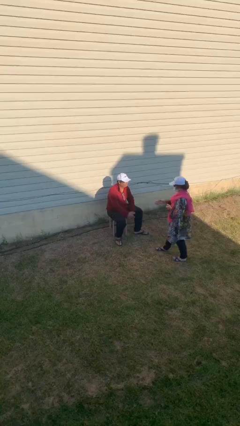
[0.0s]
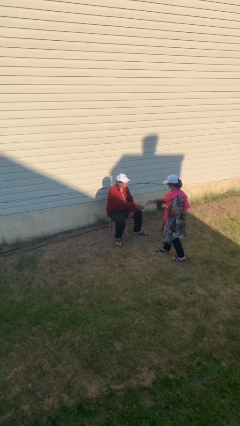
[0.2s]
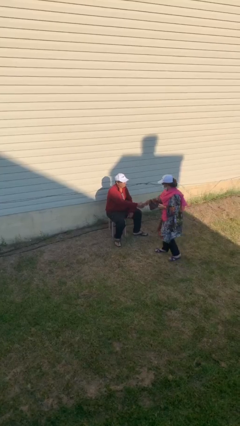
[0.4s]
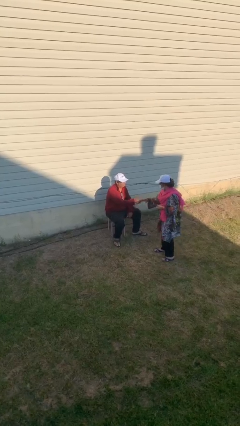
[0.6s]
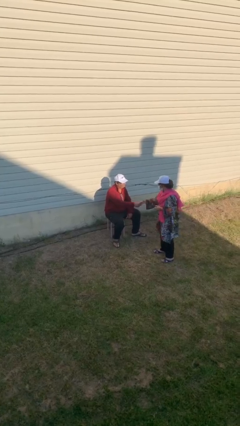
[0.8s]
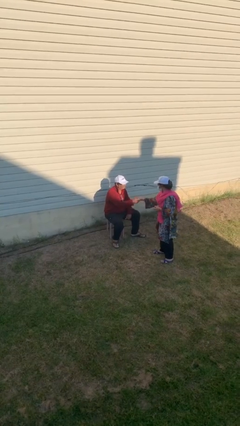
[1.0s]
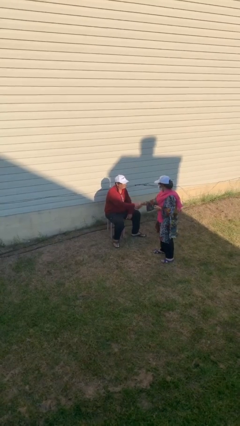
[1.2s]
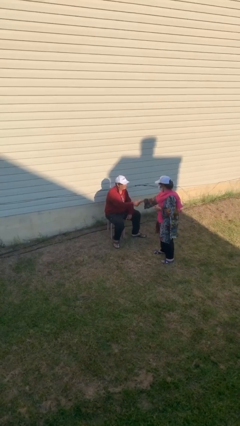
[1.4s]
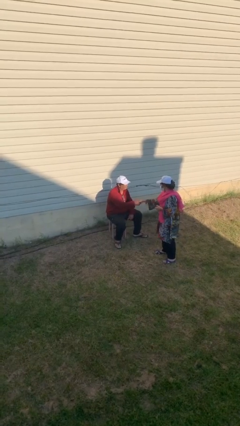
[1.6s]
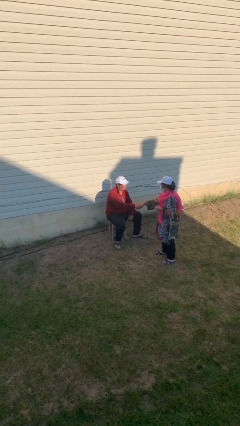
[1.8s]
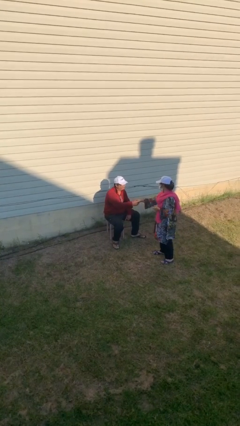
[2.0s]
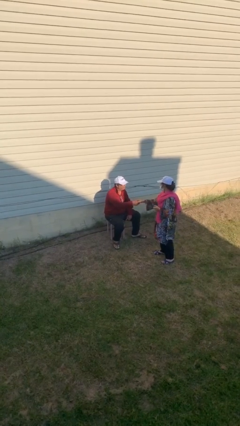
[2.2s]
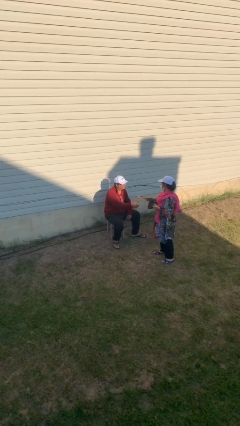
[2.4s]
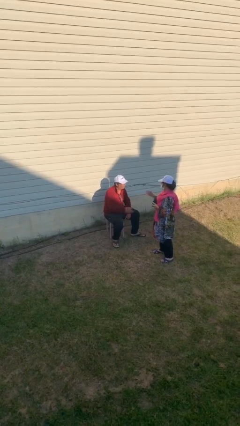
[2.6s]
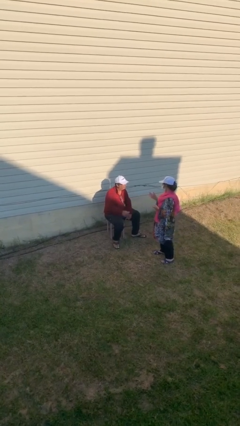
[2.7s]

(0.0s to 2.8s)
person shakes hand

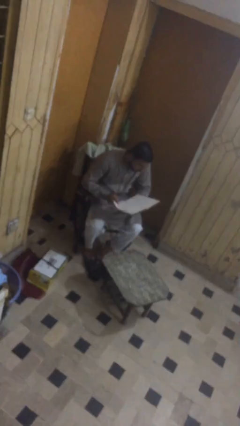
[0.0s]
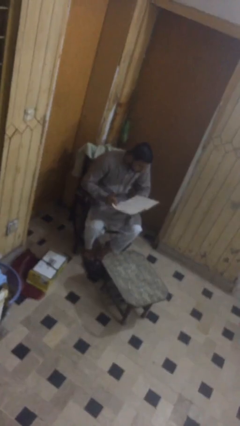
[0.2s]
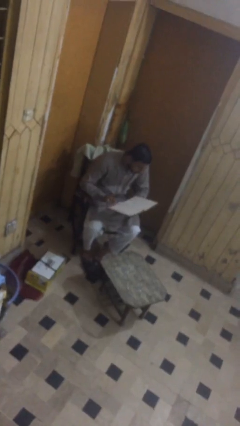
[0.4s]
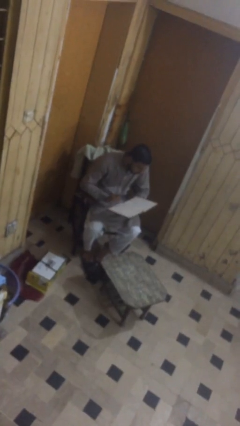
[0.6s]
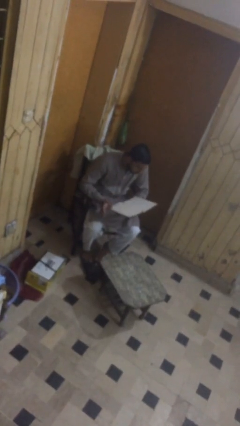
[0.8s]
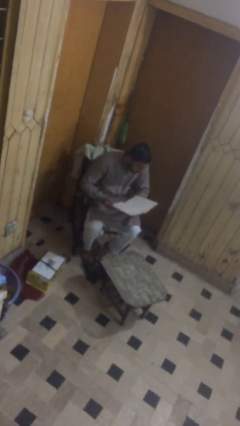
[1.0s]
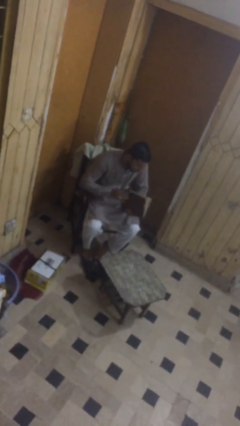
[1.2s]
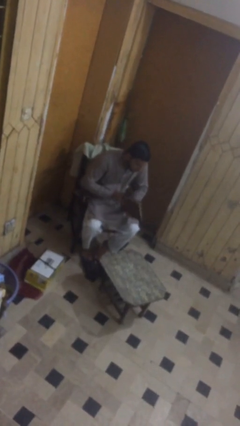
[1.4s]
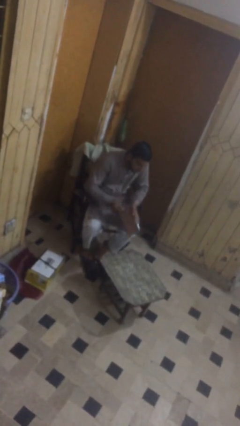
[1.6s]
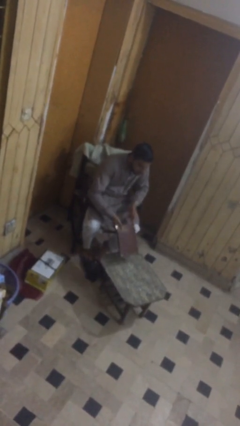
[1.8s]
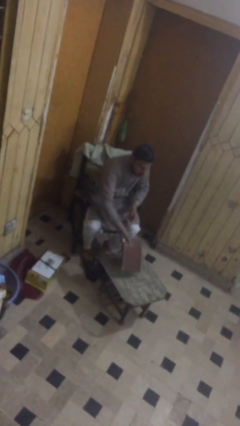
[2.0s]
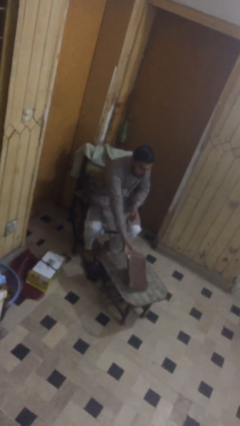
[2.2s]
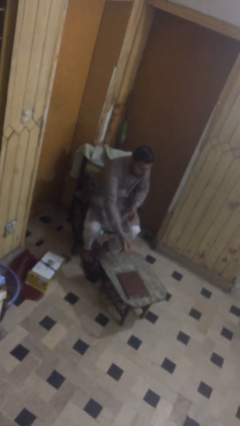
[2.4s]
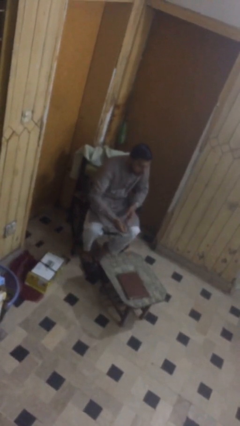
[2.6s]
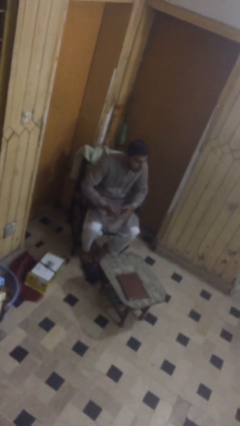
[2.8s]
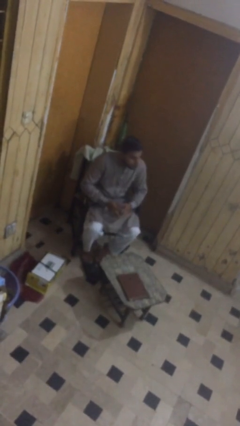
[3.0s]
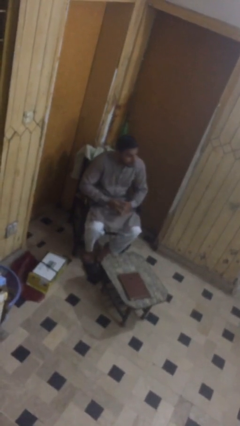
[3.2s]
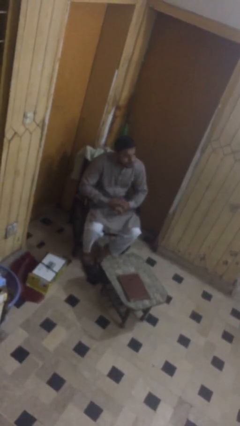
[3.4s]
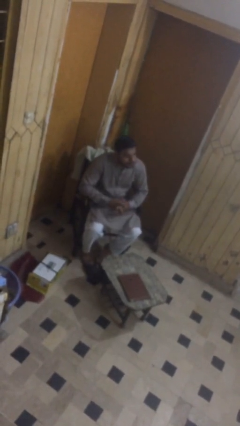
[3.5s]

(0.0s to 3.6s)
person puts down object on table

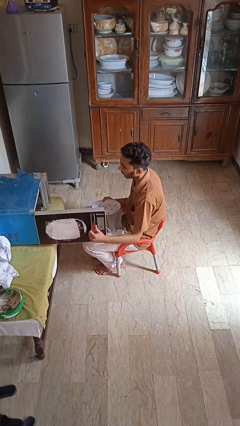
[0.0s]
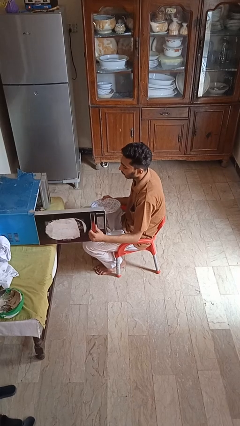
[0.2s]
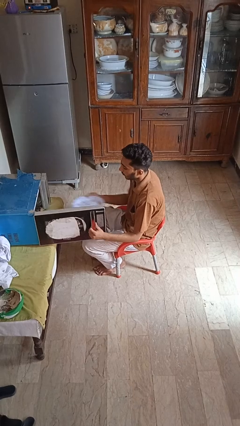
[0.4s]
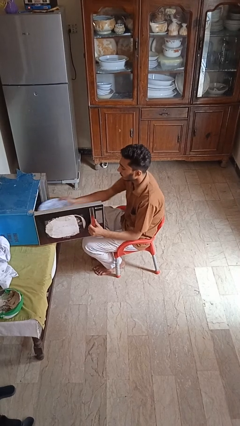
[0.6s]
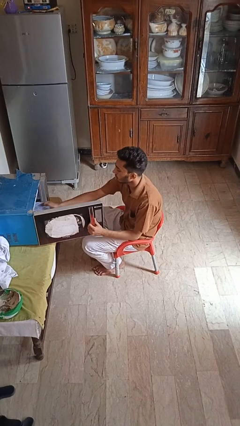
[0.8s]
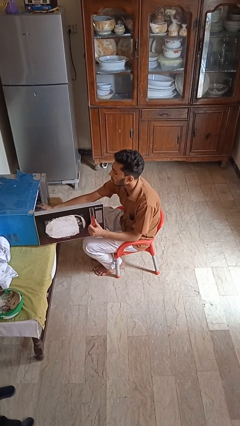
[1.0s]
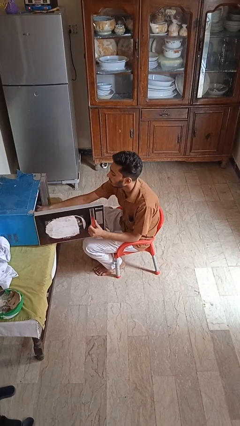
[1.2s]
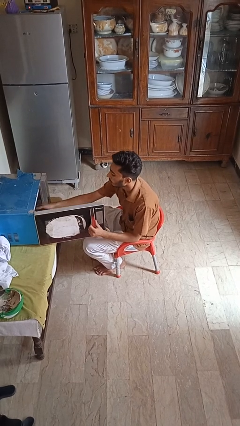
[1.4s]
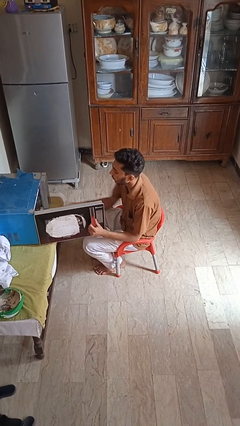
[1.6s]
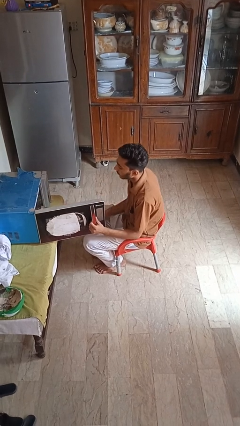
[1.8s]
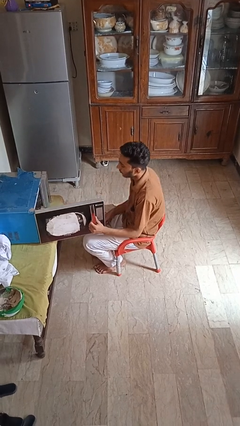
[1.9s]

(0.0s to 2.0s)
person puts object into microwave

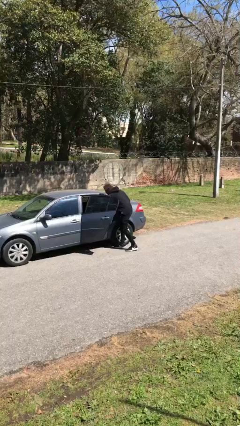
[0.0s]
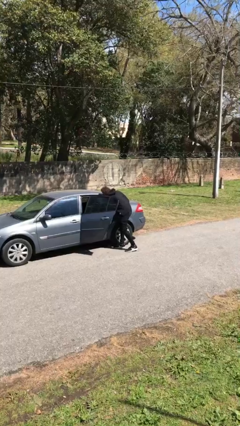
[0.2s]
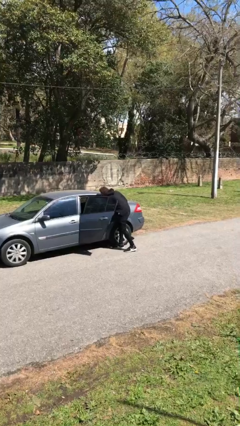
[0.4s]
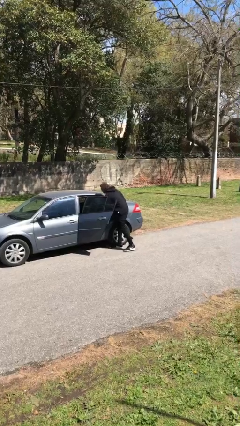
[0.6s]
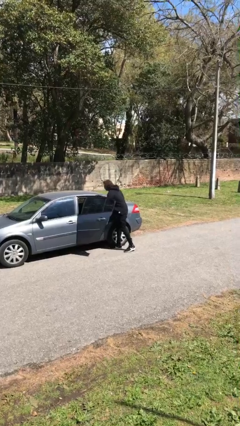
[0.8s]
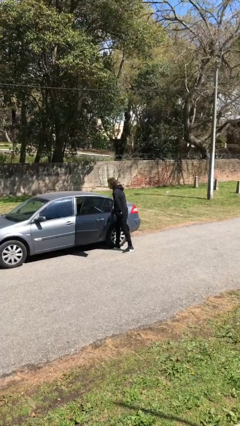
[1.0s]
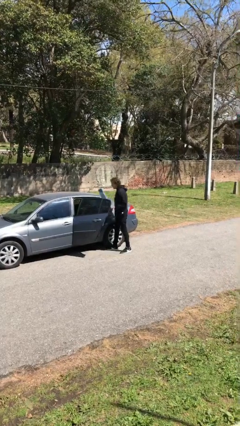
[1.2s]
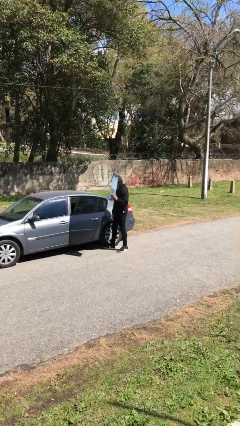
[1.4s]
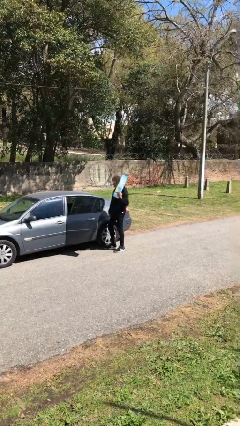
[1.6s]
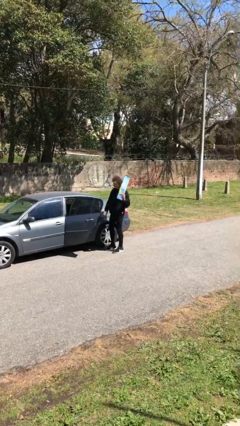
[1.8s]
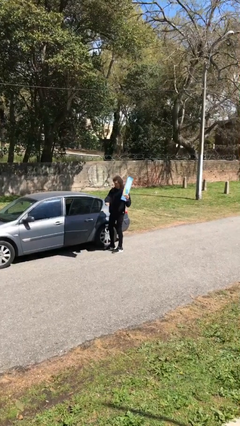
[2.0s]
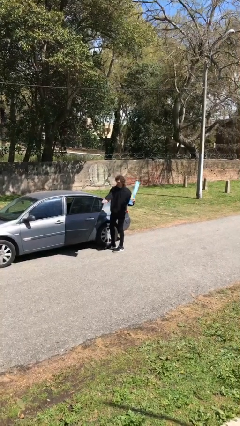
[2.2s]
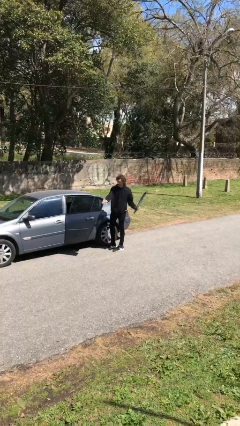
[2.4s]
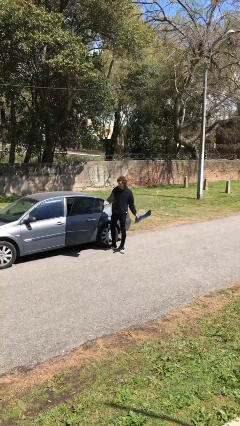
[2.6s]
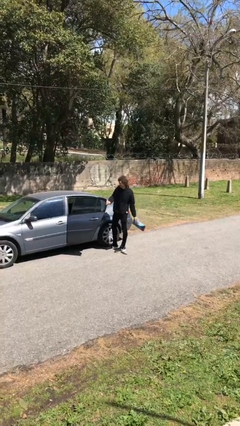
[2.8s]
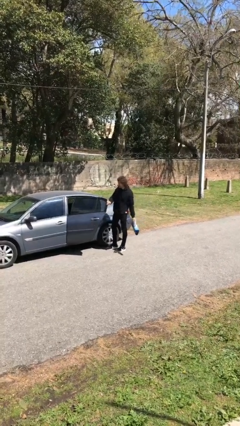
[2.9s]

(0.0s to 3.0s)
person unloads car

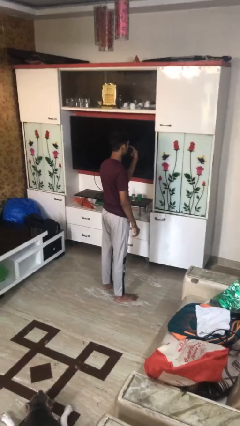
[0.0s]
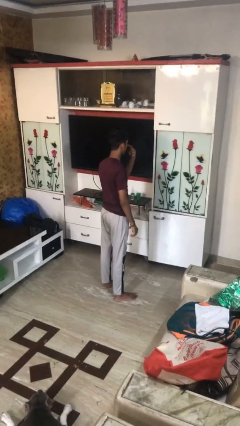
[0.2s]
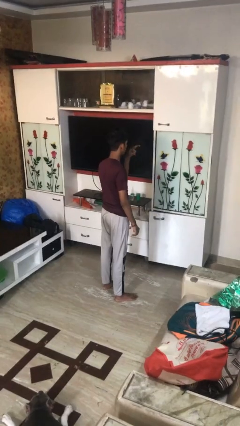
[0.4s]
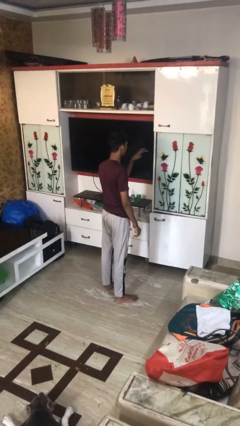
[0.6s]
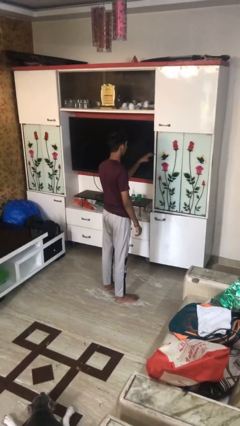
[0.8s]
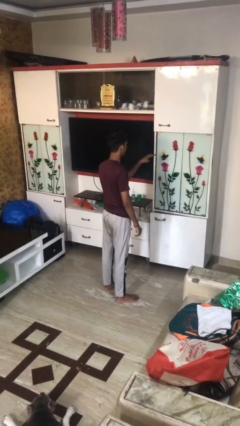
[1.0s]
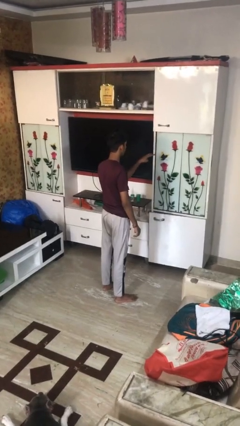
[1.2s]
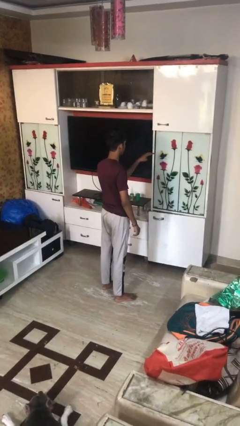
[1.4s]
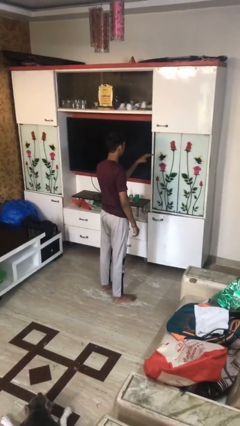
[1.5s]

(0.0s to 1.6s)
person gestures watch closely

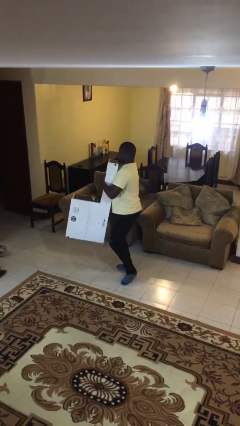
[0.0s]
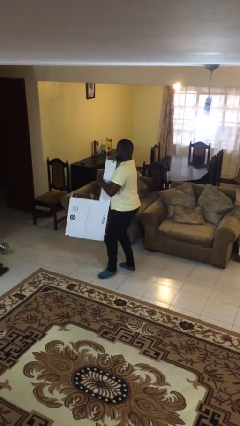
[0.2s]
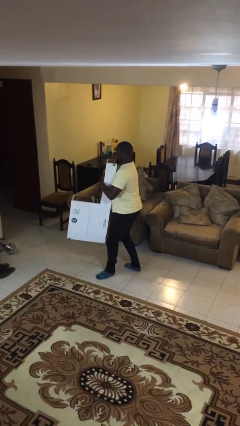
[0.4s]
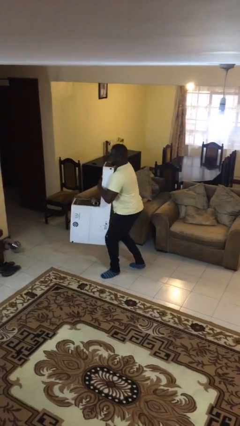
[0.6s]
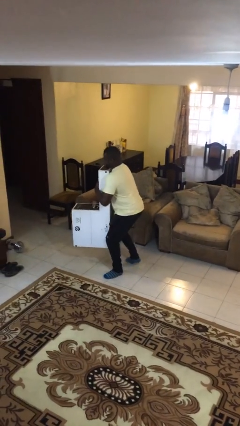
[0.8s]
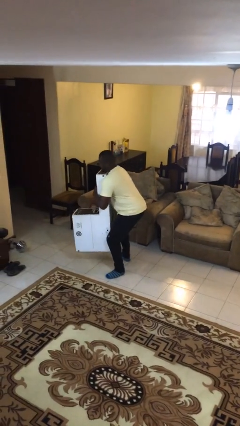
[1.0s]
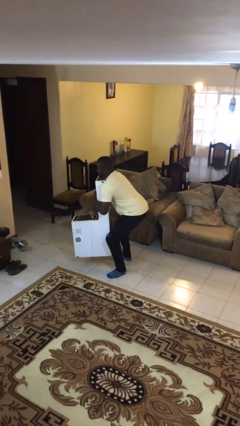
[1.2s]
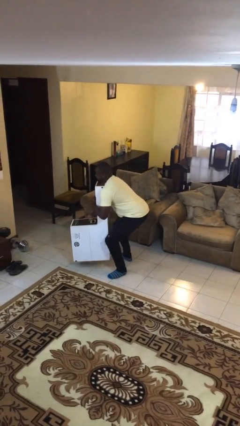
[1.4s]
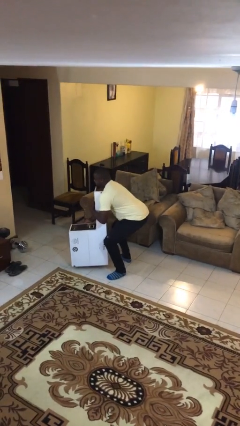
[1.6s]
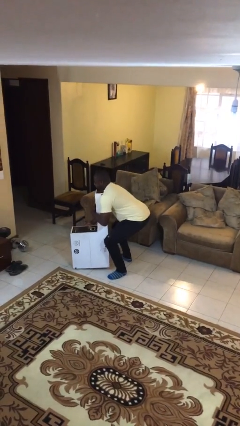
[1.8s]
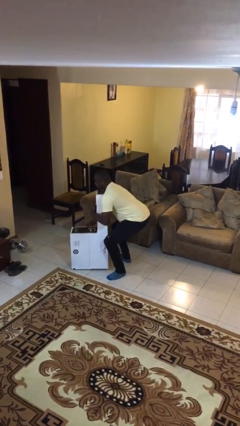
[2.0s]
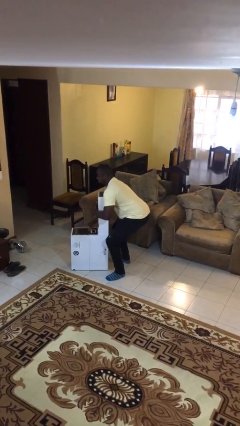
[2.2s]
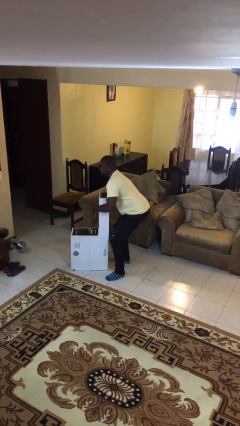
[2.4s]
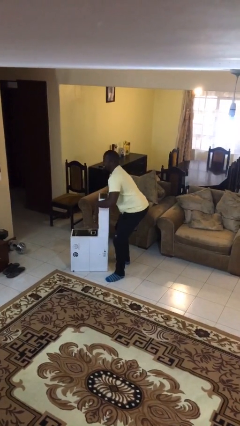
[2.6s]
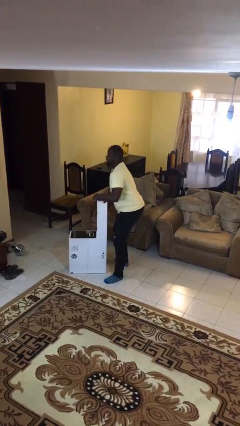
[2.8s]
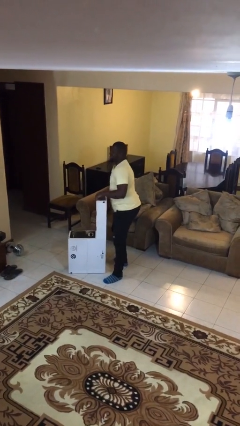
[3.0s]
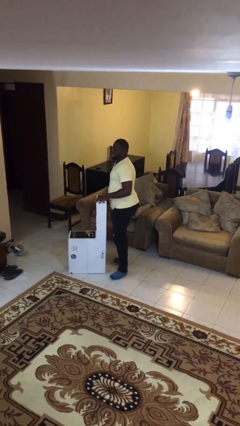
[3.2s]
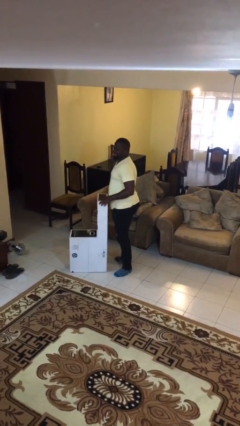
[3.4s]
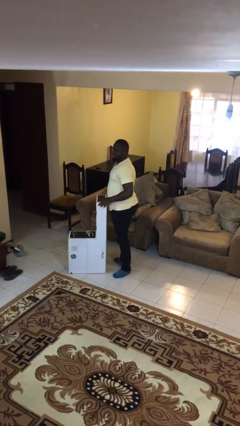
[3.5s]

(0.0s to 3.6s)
person puts down object on floor

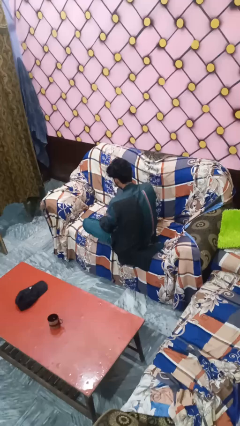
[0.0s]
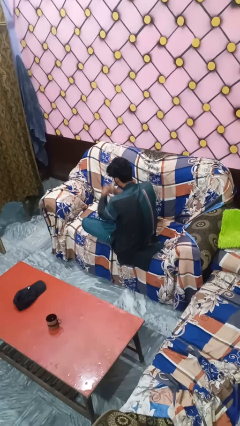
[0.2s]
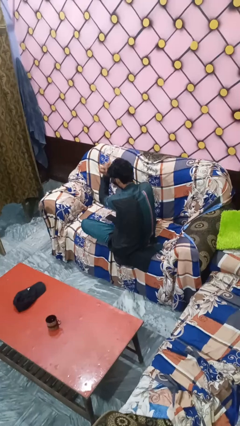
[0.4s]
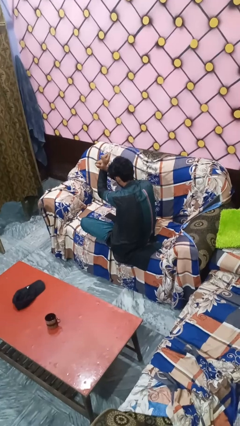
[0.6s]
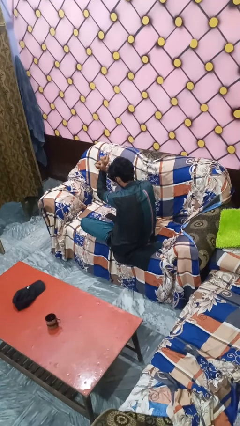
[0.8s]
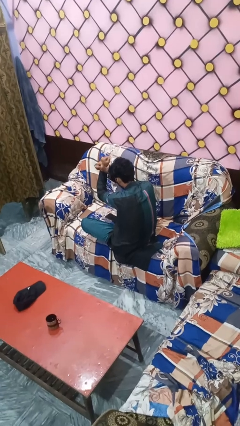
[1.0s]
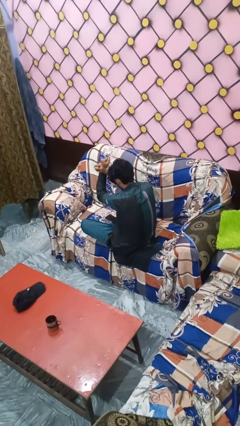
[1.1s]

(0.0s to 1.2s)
person gestures arms x
